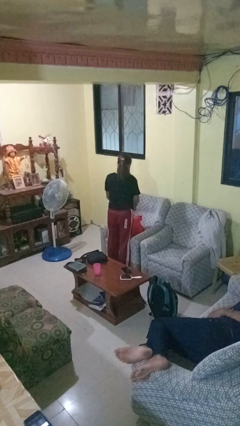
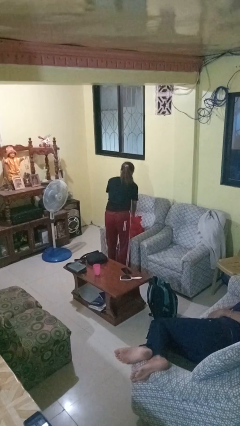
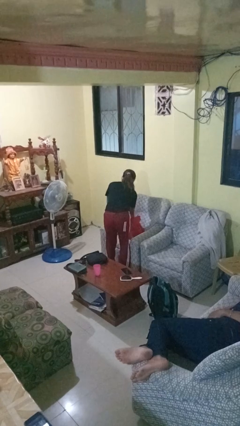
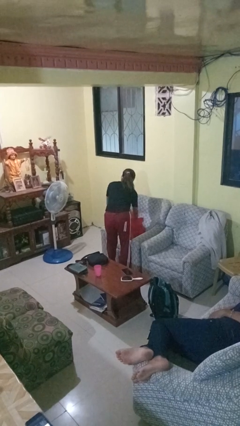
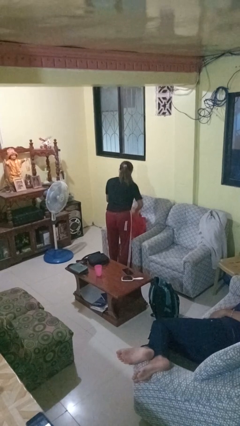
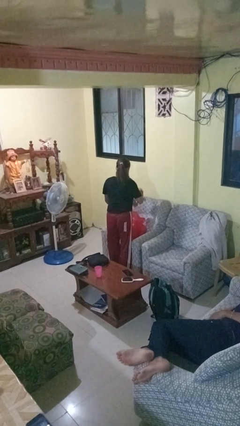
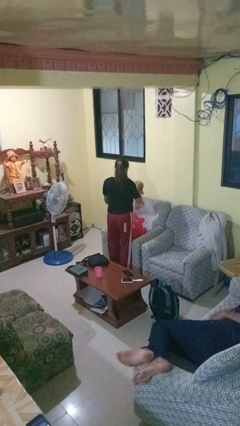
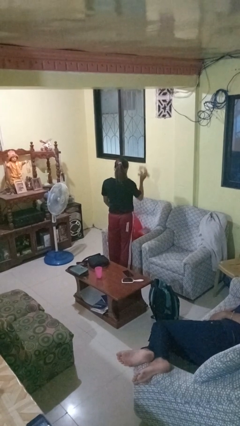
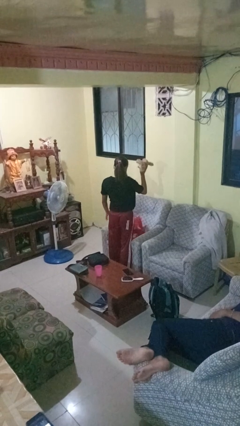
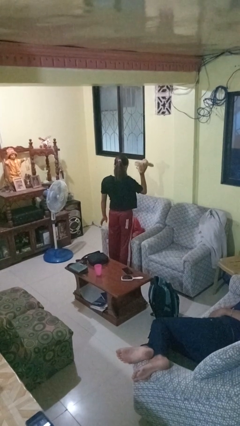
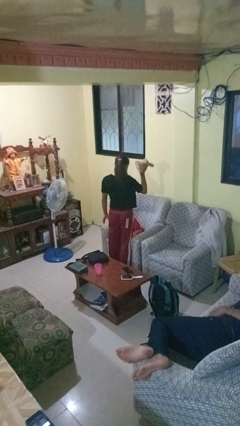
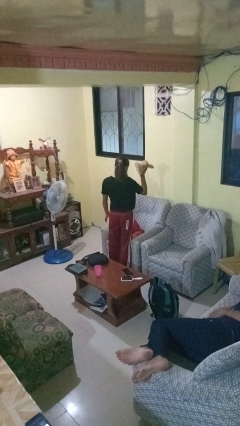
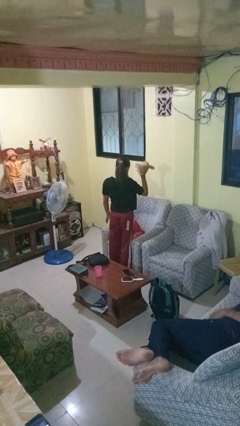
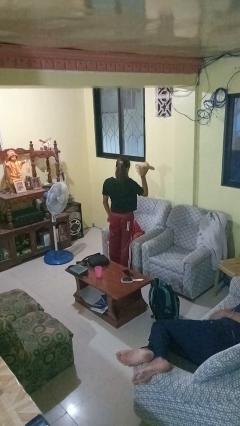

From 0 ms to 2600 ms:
person takes object from bag

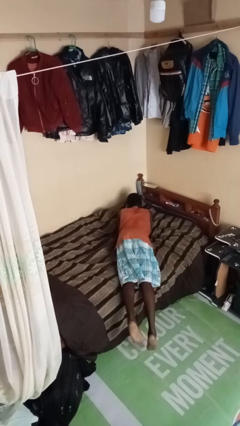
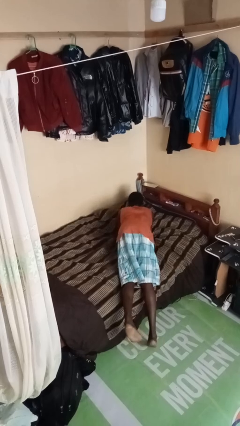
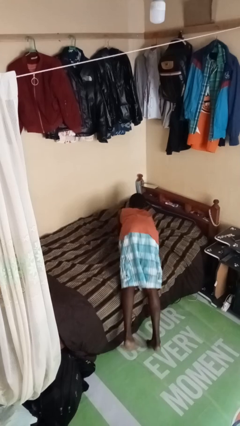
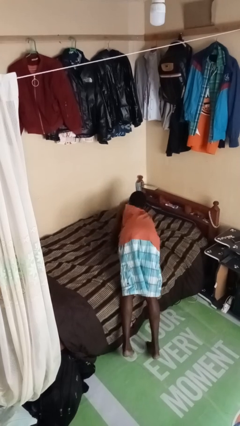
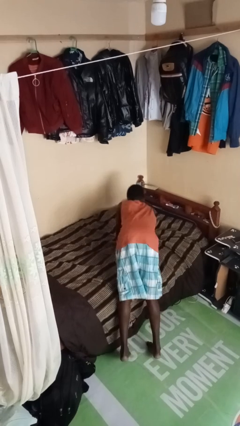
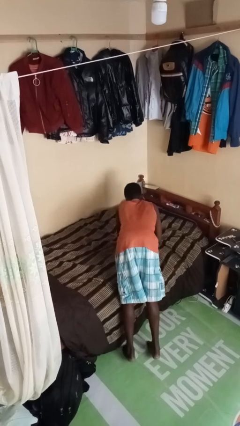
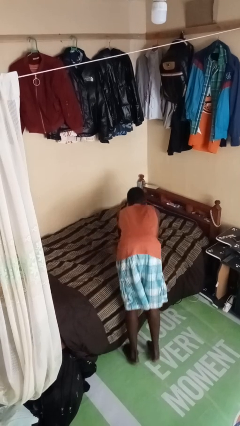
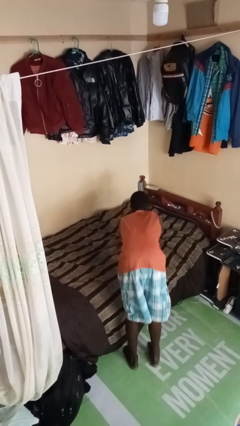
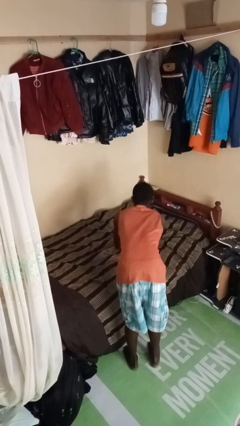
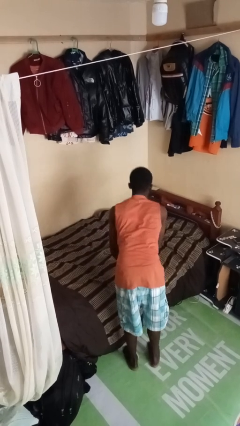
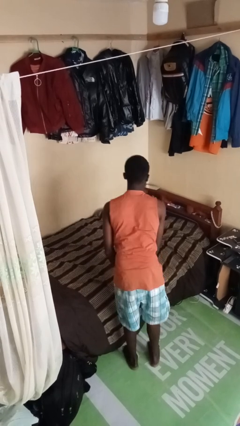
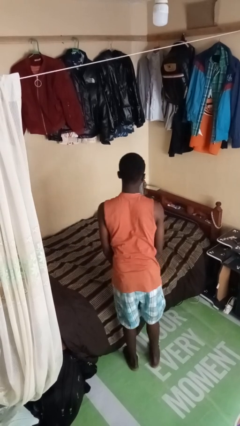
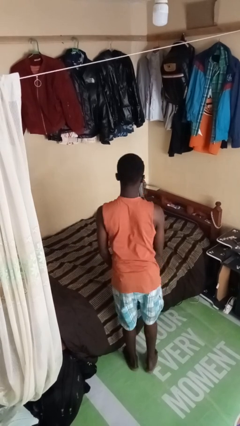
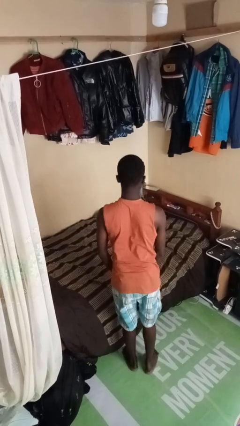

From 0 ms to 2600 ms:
person stands up

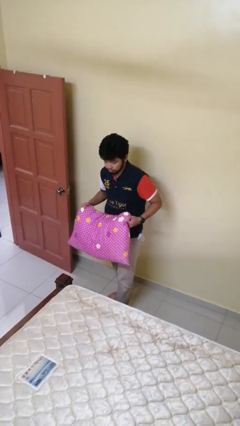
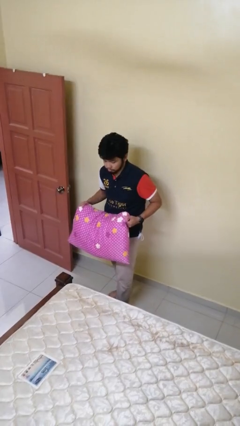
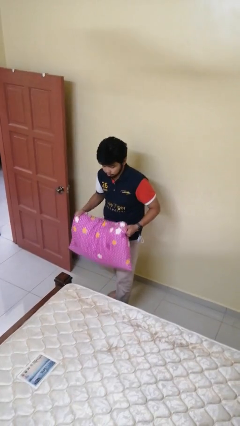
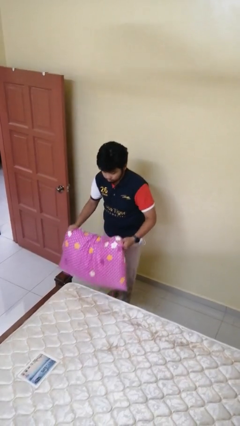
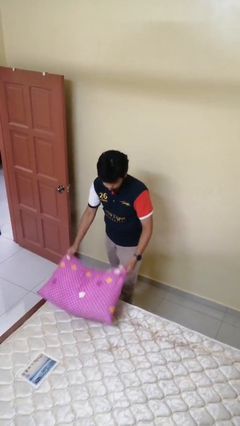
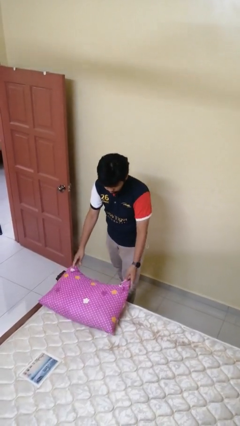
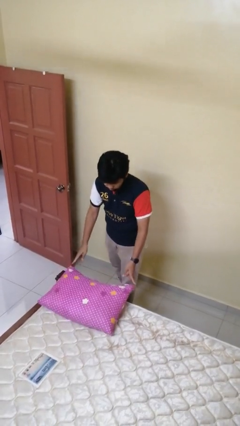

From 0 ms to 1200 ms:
person puts down object on bed

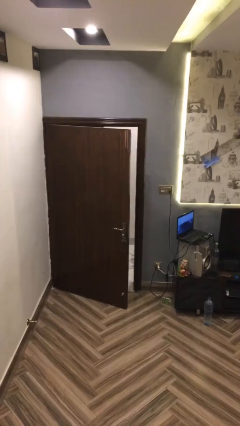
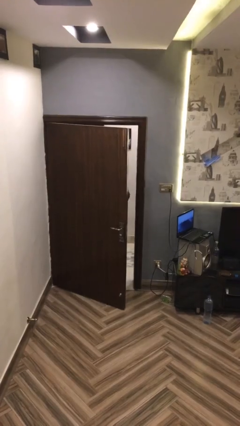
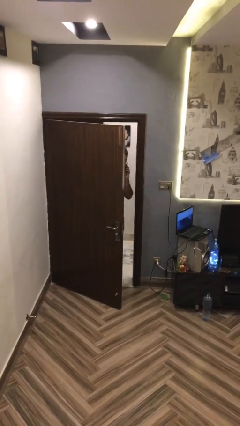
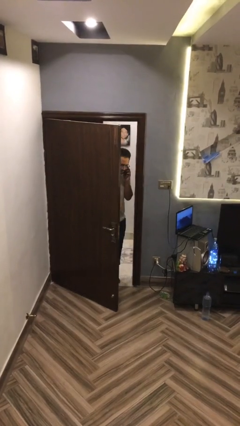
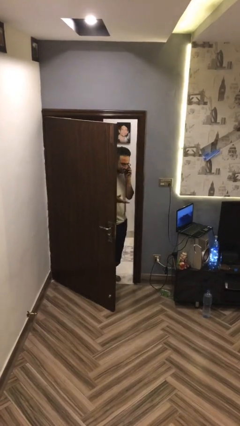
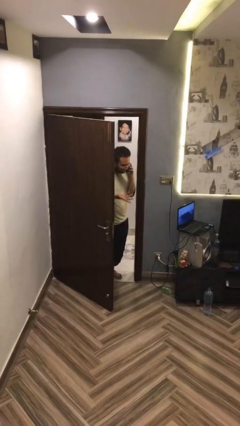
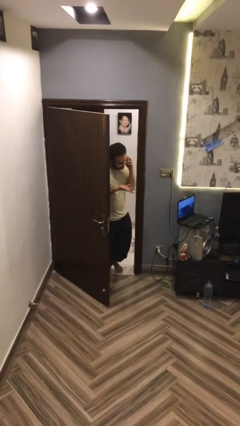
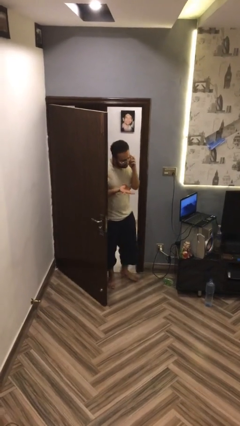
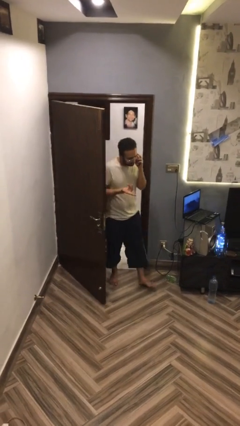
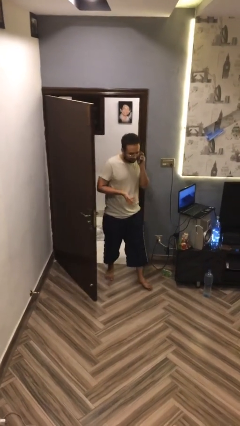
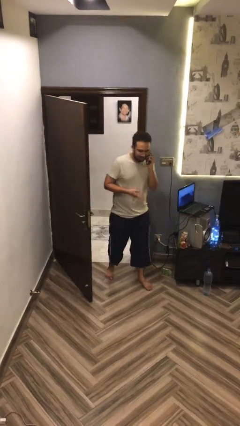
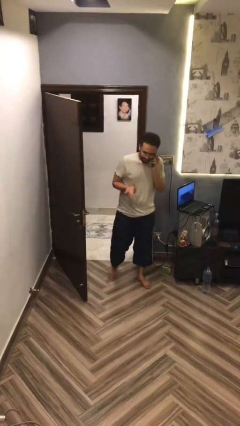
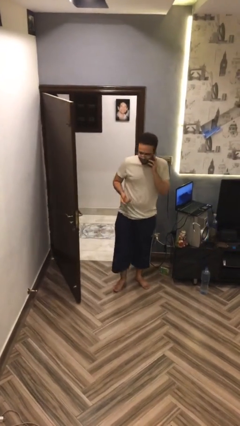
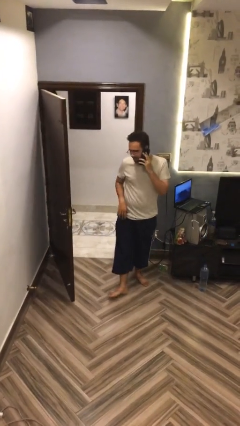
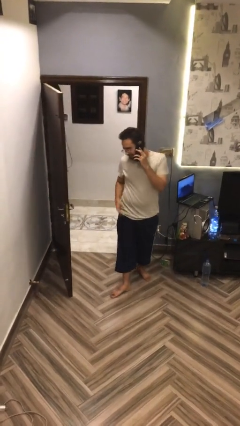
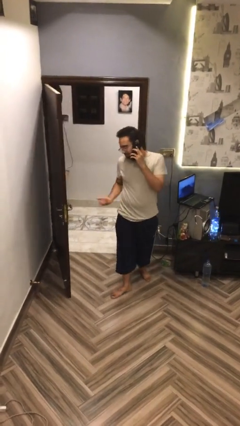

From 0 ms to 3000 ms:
person enters scene through structure

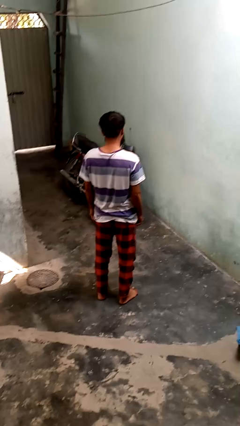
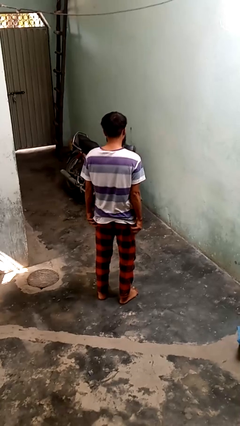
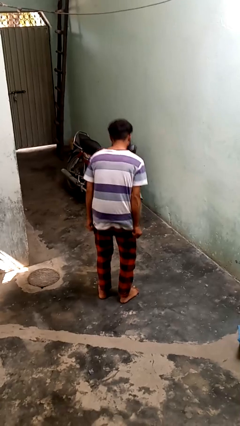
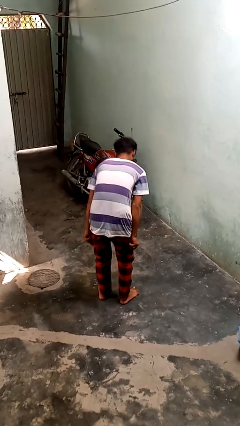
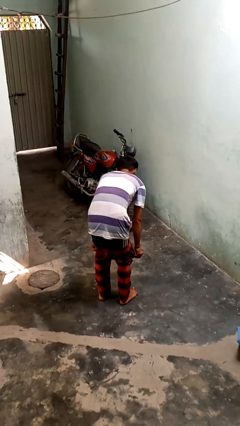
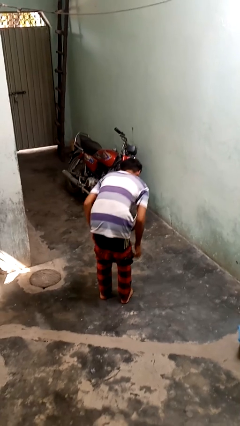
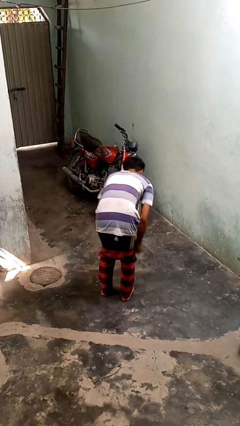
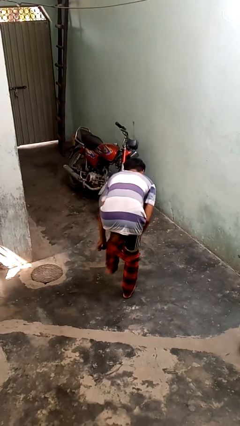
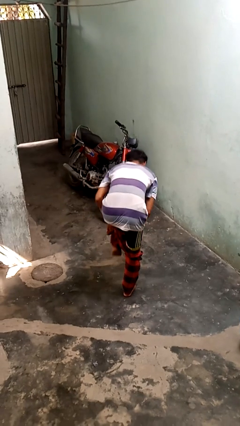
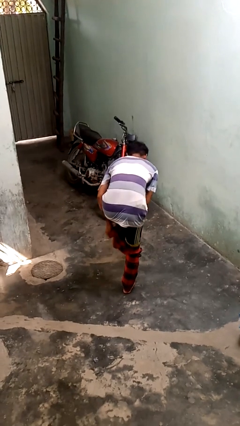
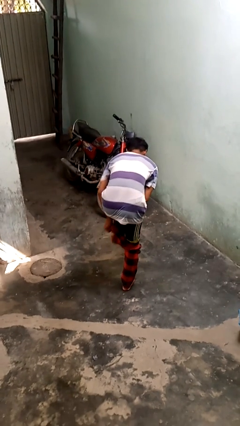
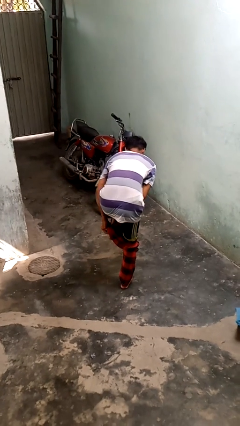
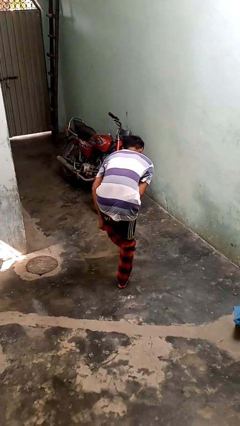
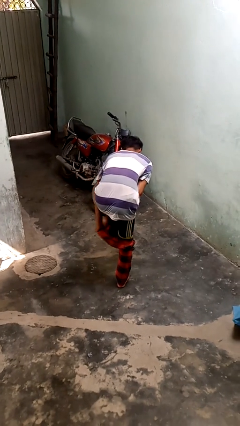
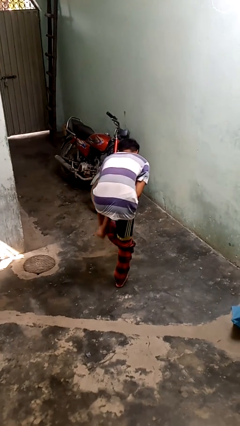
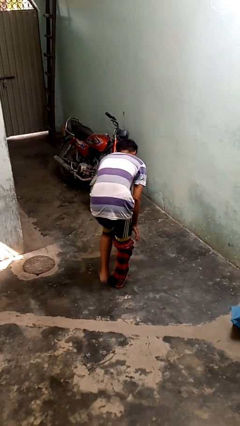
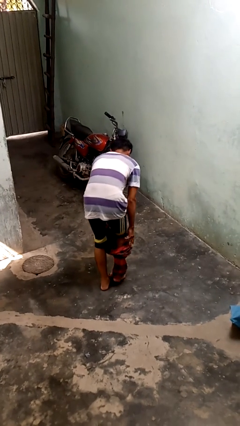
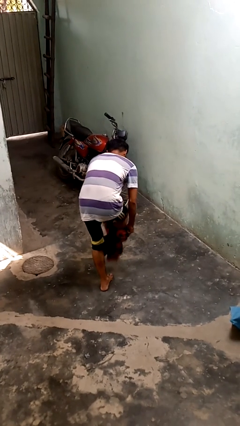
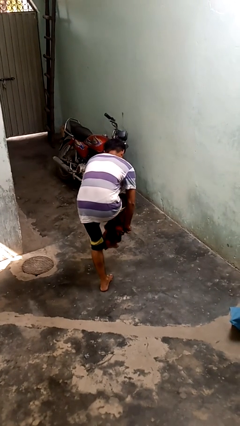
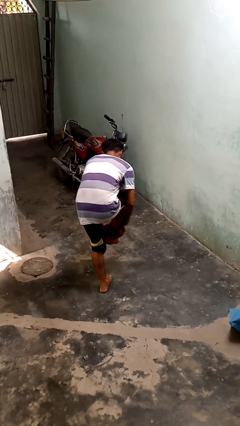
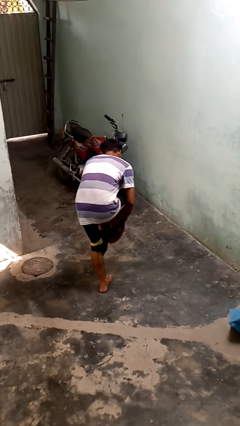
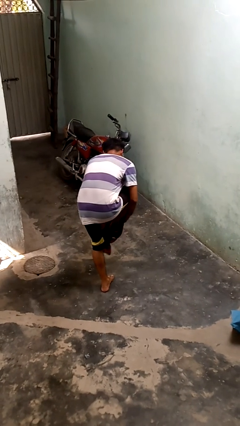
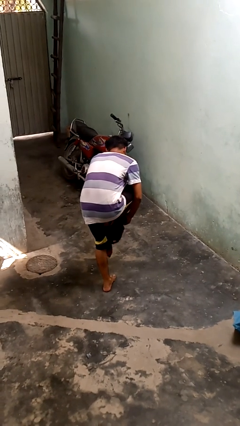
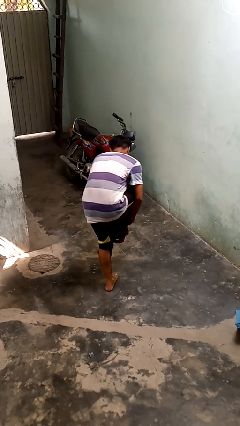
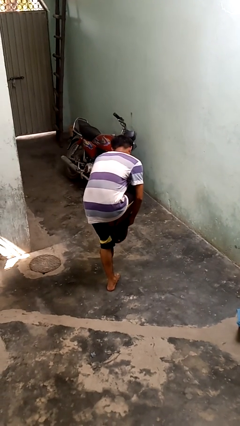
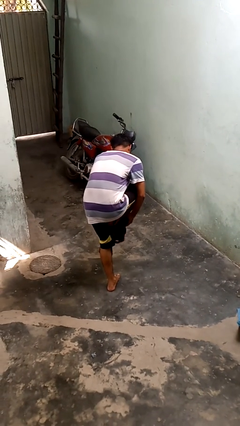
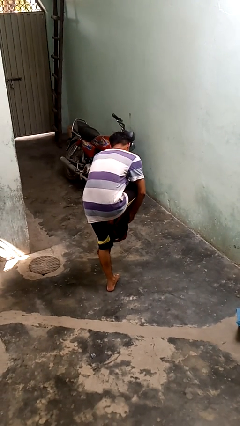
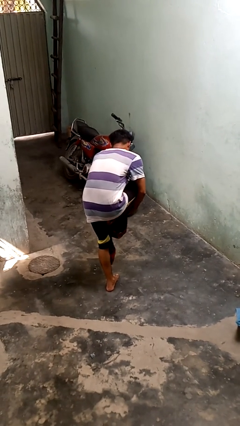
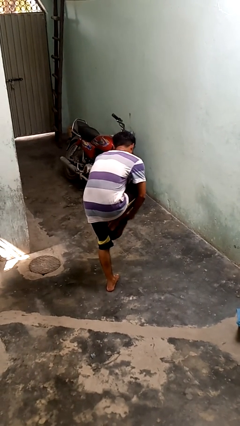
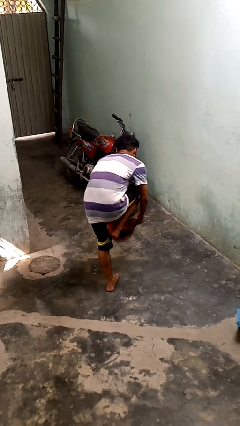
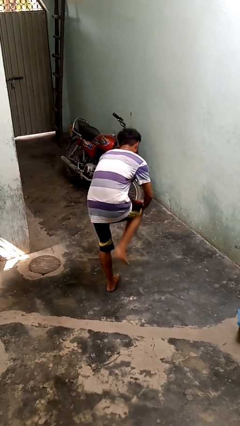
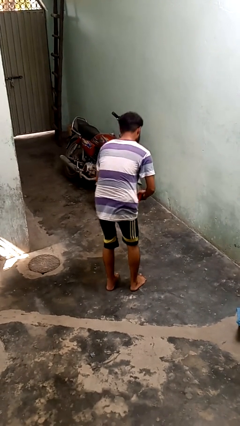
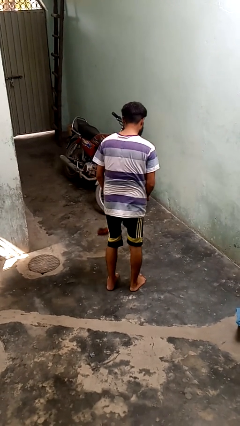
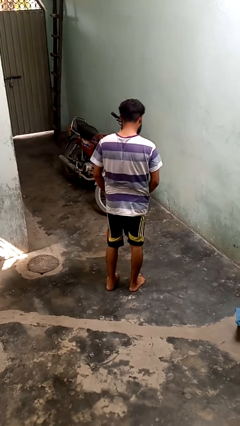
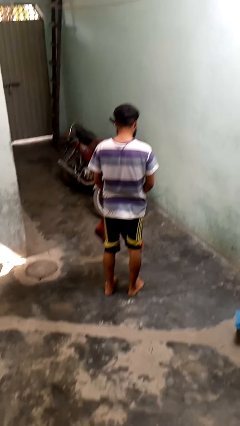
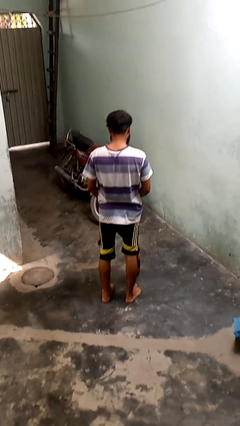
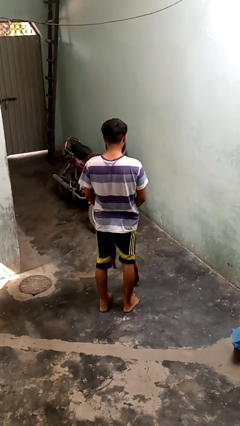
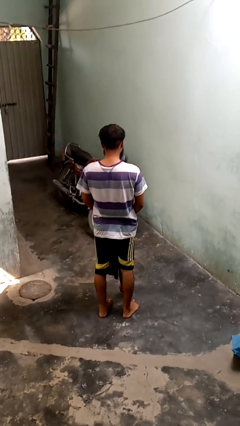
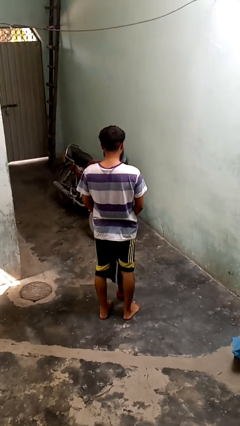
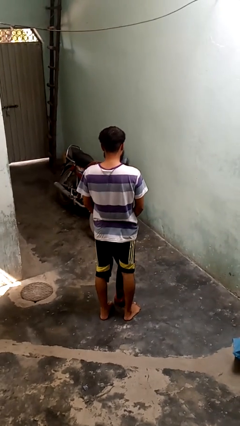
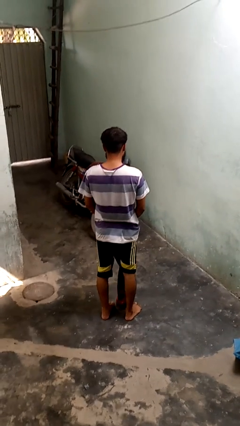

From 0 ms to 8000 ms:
person takes off pants

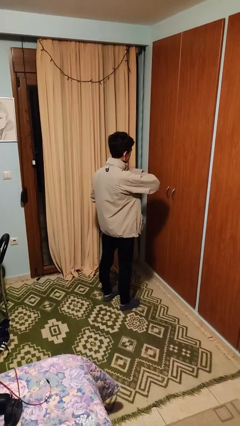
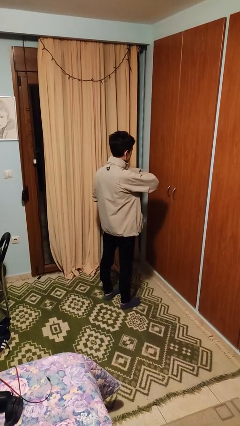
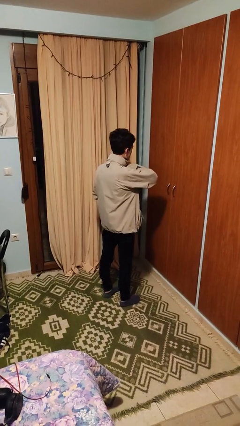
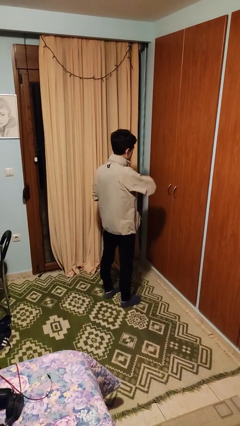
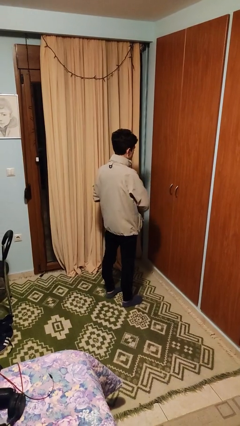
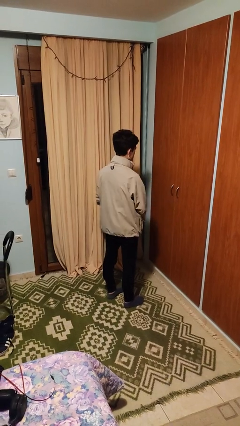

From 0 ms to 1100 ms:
person unzips jacket
